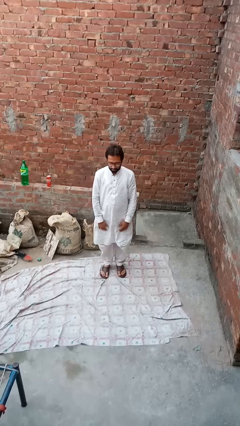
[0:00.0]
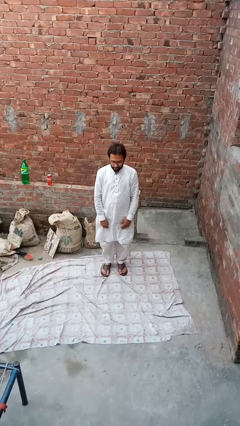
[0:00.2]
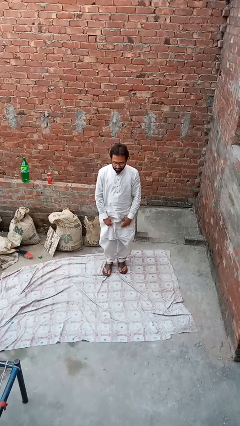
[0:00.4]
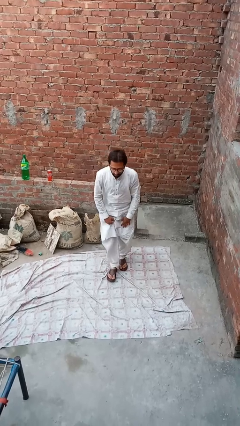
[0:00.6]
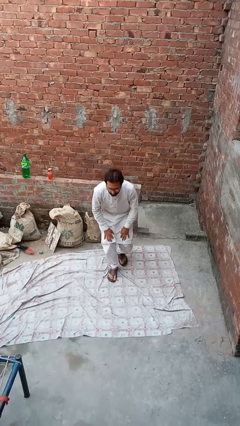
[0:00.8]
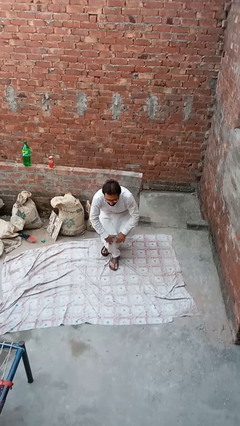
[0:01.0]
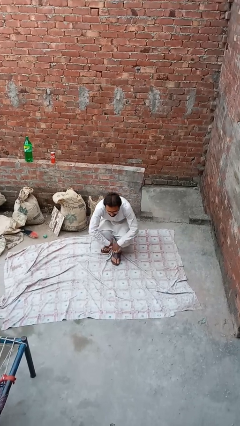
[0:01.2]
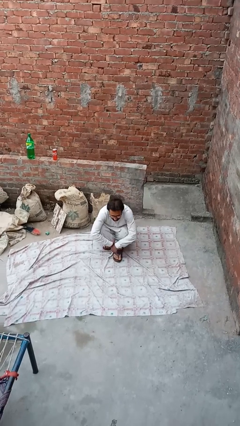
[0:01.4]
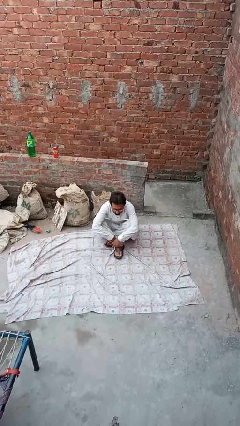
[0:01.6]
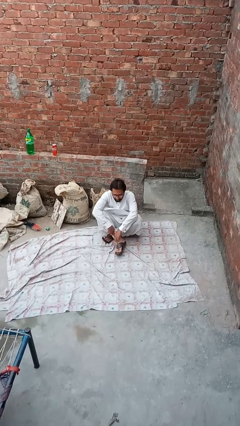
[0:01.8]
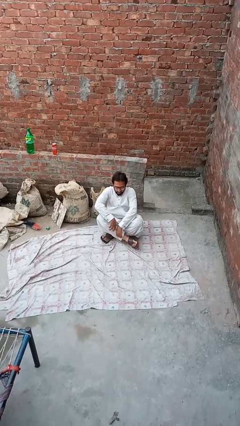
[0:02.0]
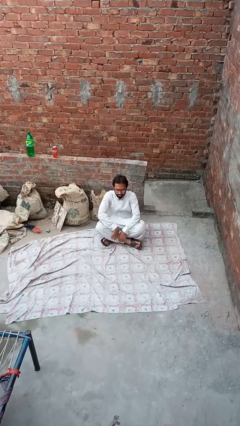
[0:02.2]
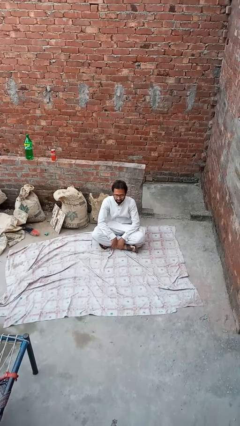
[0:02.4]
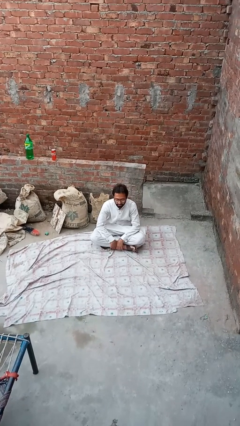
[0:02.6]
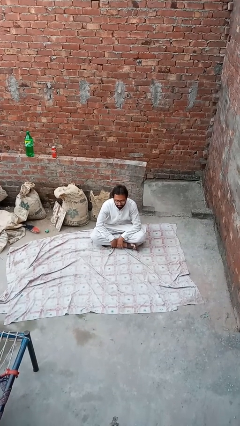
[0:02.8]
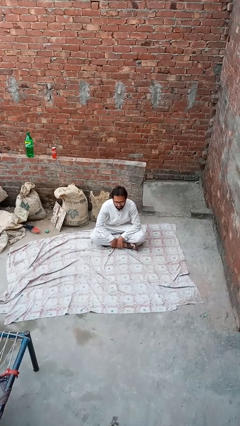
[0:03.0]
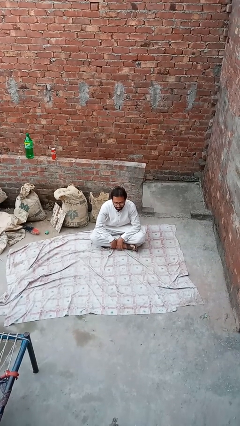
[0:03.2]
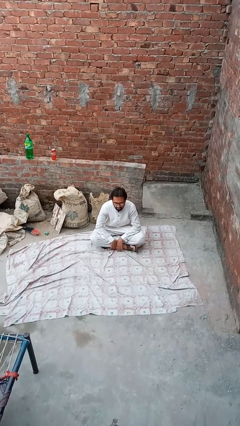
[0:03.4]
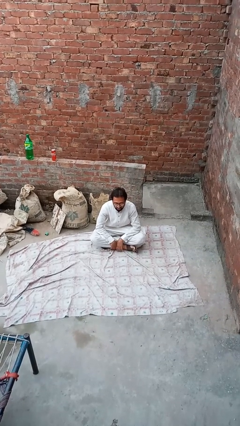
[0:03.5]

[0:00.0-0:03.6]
person sits crisscross

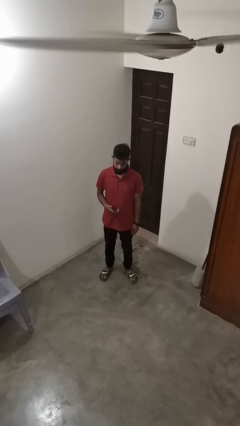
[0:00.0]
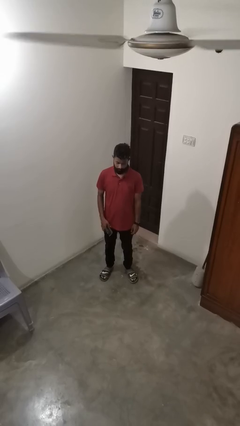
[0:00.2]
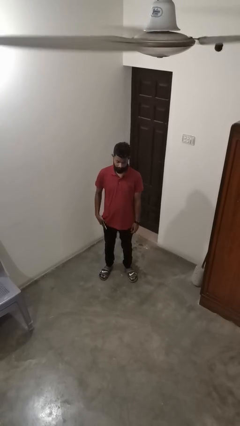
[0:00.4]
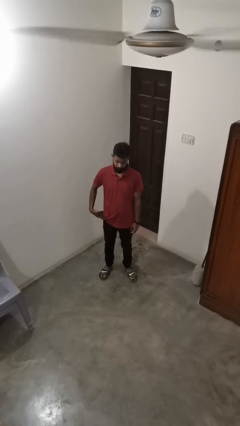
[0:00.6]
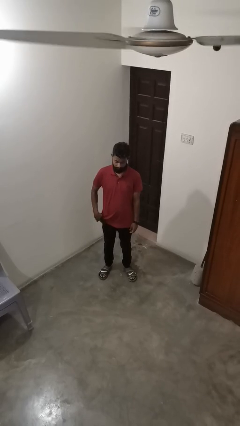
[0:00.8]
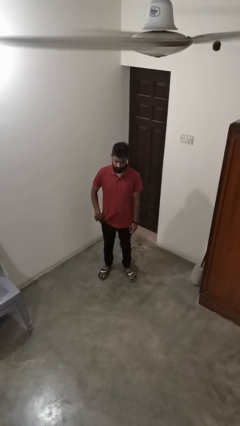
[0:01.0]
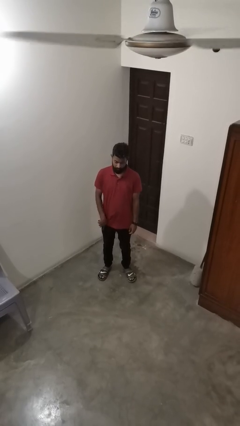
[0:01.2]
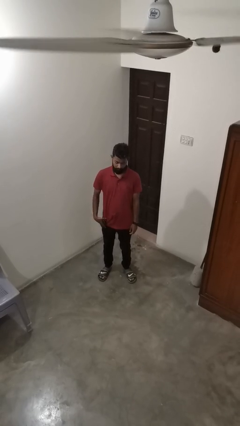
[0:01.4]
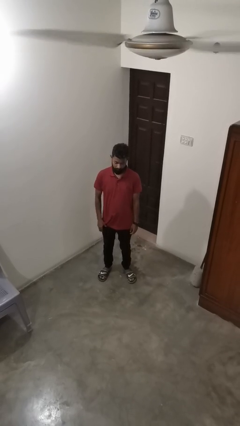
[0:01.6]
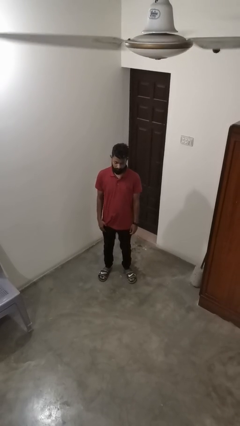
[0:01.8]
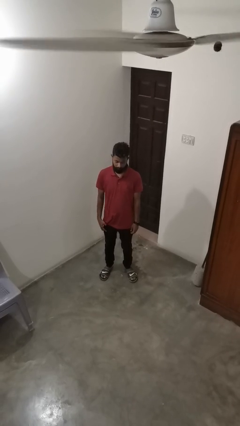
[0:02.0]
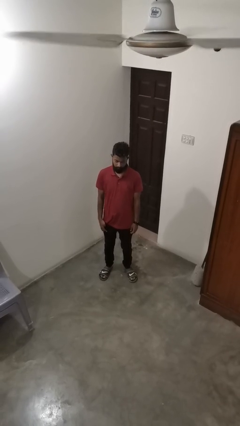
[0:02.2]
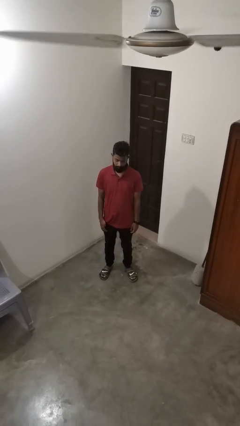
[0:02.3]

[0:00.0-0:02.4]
person puts phone into pocket

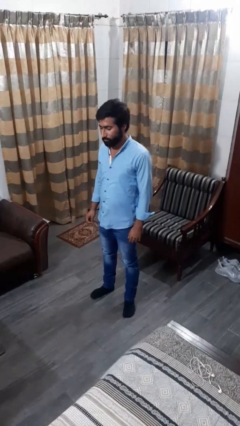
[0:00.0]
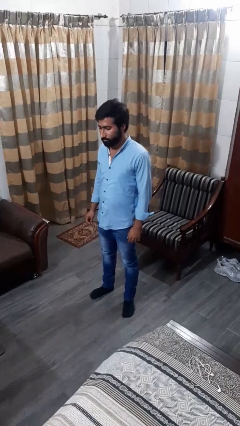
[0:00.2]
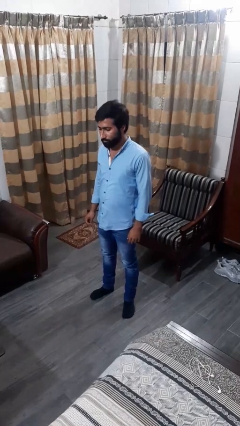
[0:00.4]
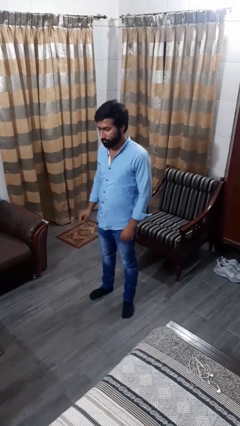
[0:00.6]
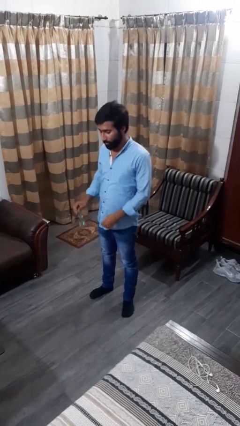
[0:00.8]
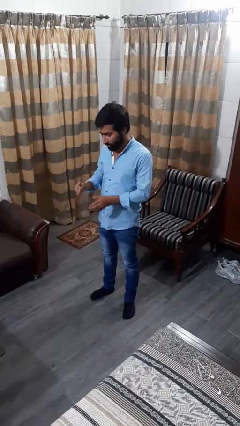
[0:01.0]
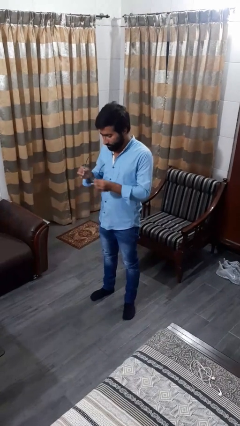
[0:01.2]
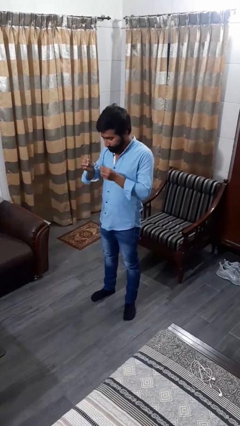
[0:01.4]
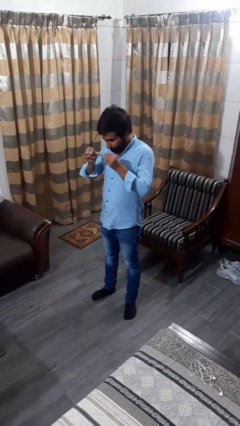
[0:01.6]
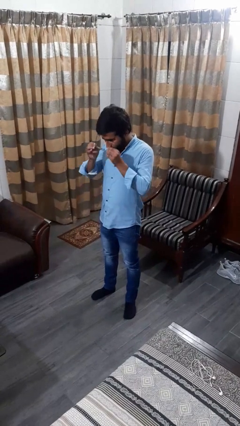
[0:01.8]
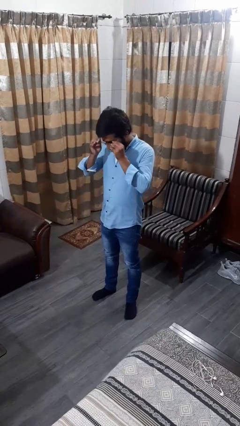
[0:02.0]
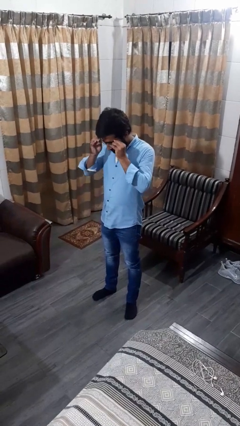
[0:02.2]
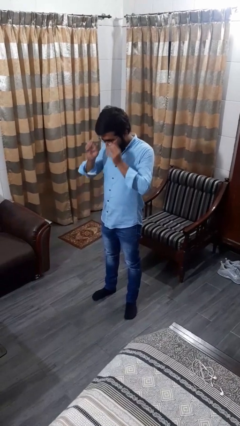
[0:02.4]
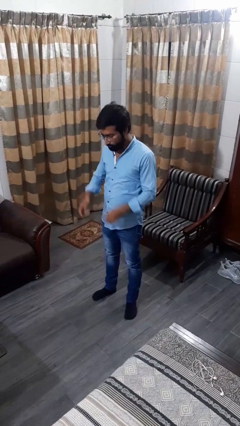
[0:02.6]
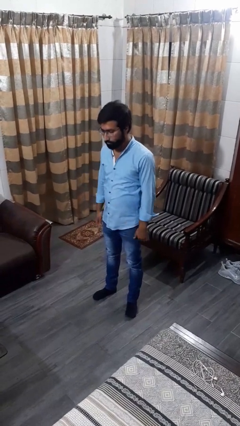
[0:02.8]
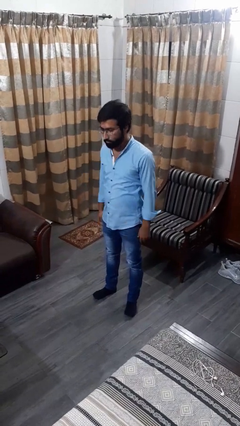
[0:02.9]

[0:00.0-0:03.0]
person puts on glasses

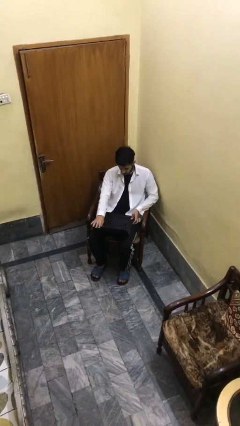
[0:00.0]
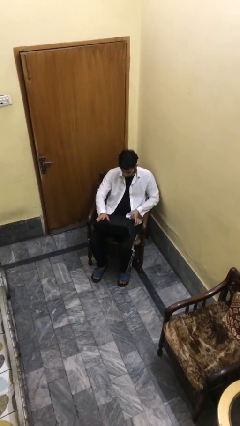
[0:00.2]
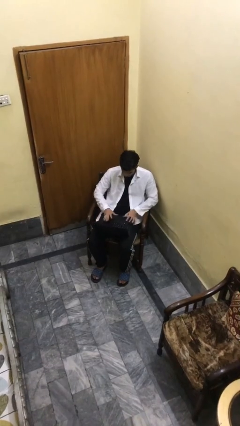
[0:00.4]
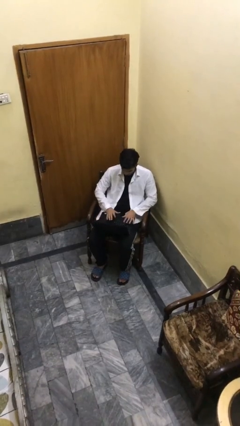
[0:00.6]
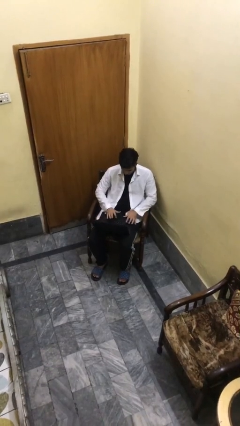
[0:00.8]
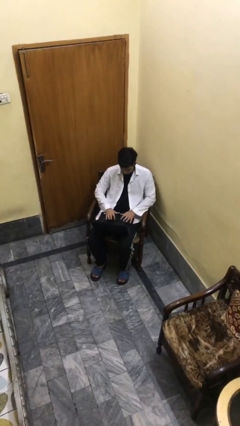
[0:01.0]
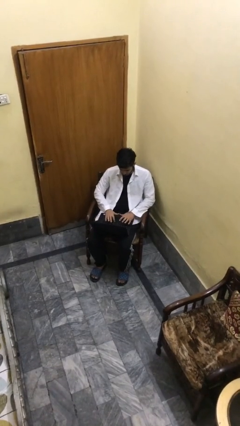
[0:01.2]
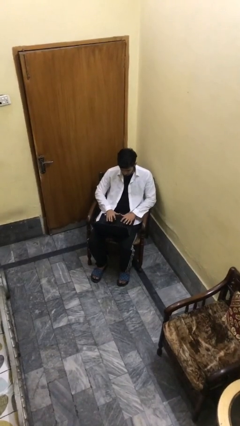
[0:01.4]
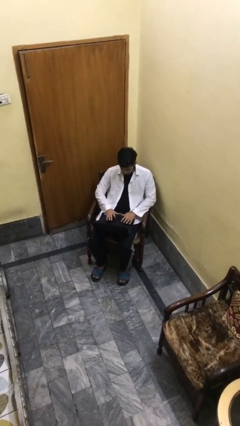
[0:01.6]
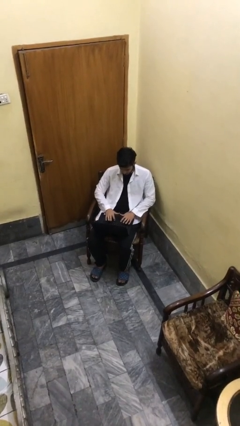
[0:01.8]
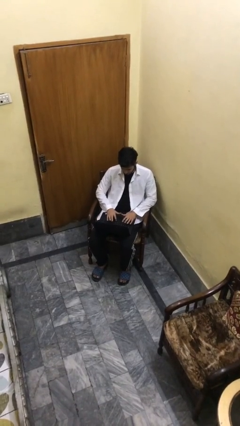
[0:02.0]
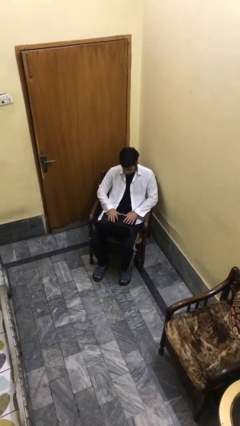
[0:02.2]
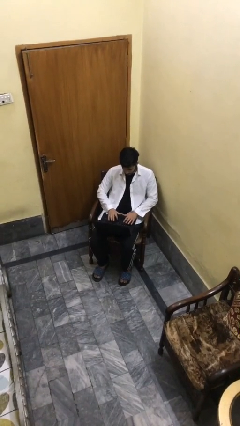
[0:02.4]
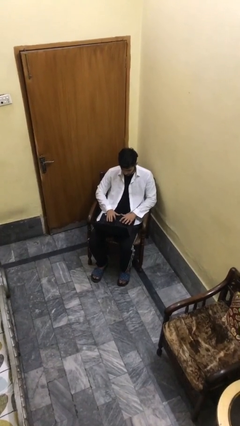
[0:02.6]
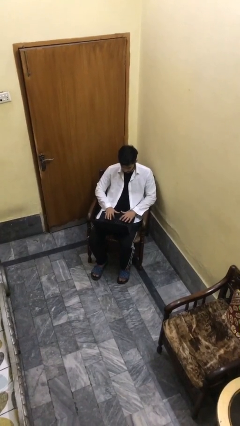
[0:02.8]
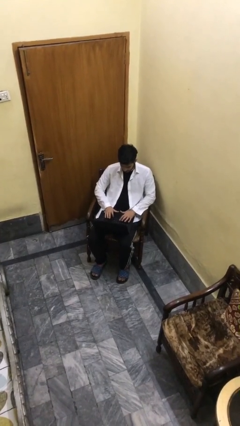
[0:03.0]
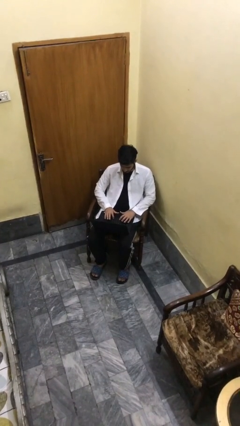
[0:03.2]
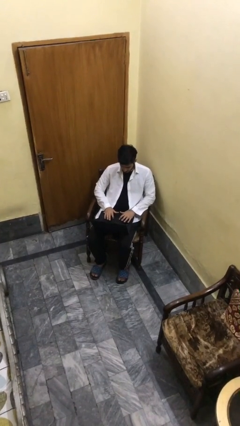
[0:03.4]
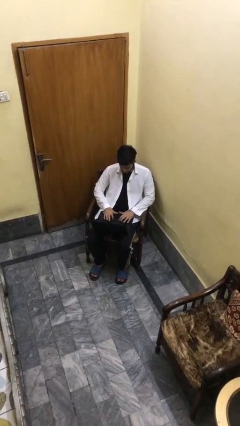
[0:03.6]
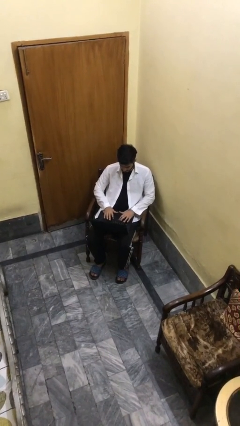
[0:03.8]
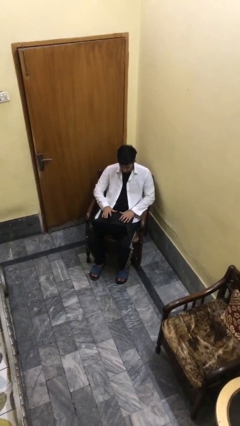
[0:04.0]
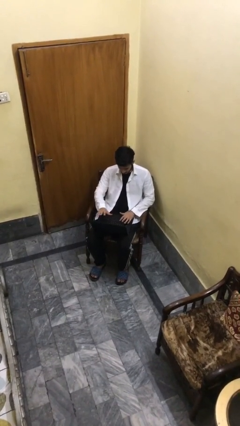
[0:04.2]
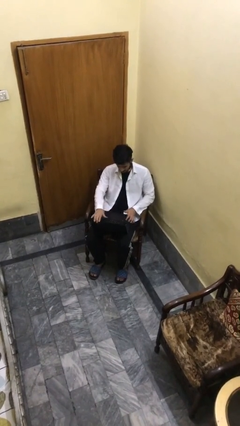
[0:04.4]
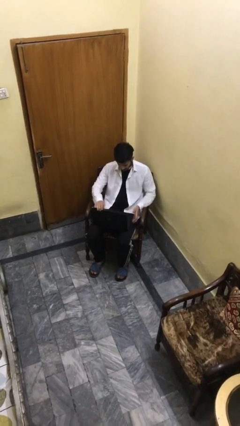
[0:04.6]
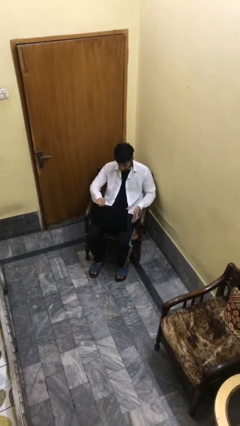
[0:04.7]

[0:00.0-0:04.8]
person interacts with laptop

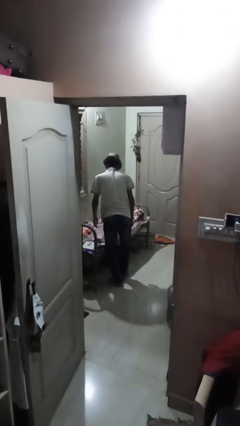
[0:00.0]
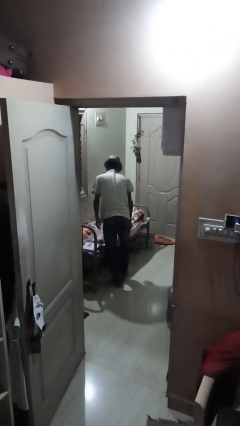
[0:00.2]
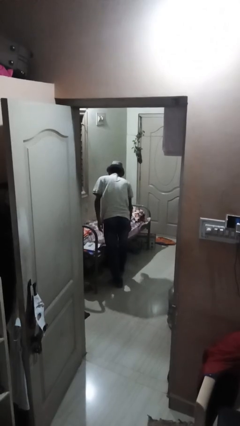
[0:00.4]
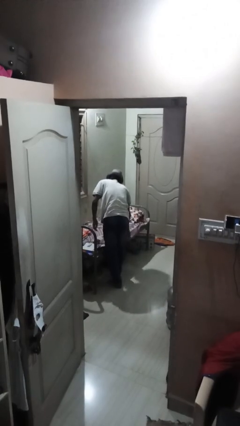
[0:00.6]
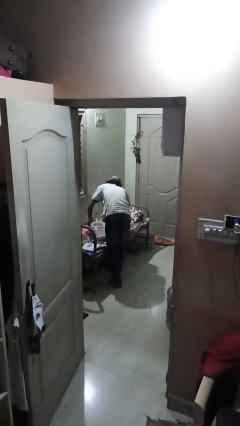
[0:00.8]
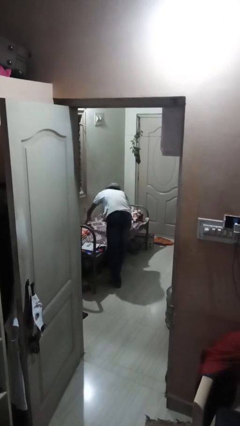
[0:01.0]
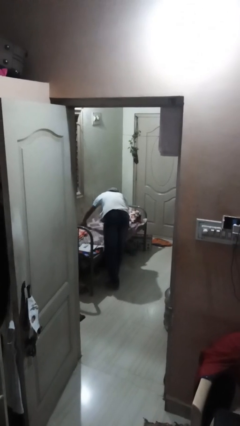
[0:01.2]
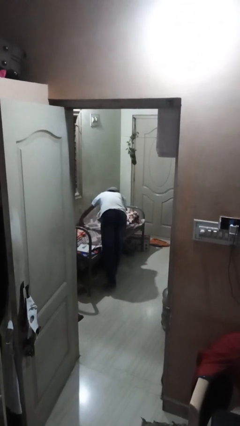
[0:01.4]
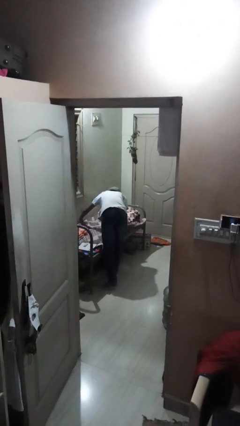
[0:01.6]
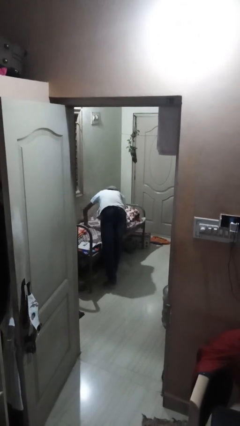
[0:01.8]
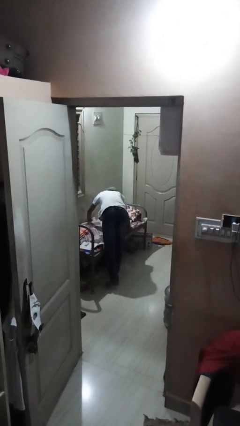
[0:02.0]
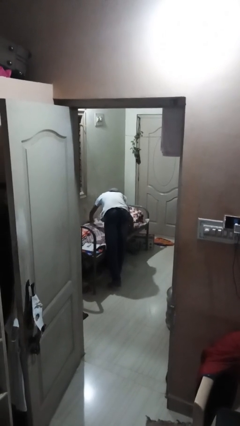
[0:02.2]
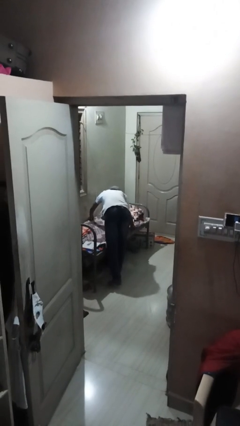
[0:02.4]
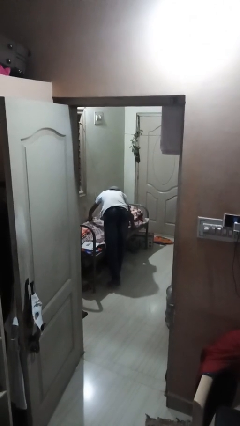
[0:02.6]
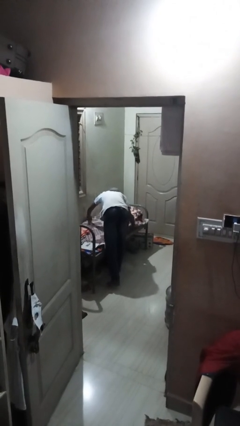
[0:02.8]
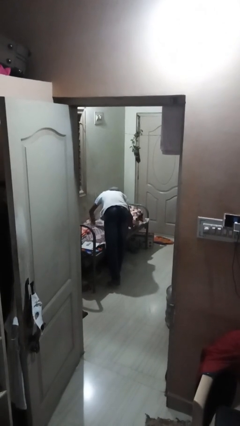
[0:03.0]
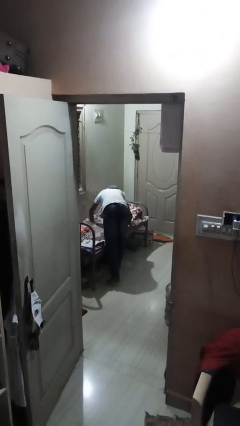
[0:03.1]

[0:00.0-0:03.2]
person makes bed

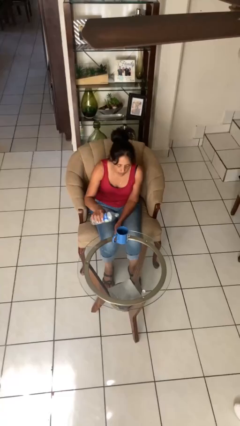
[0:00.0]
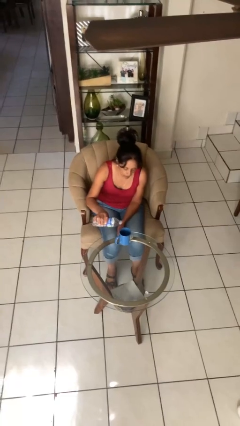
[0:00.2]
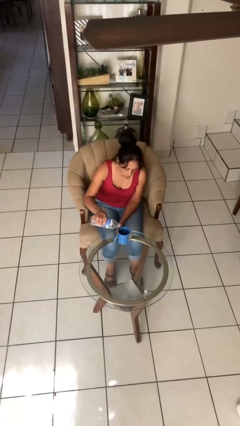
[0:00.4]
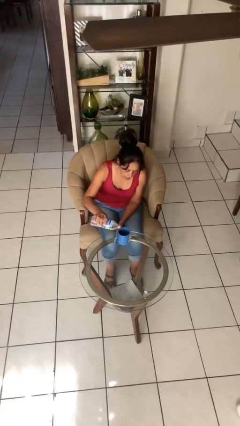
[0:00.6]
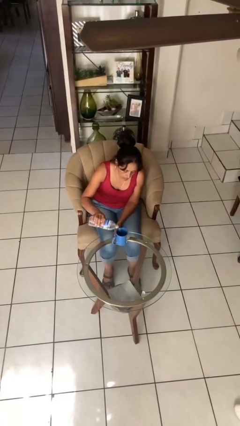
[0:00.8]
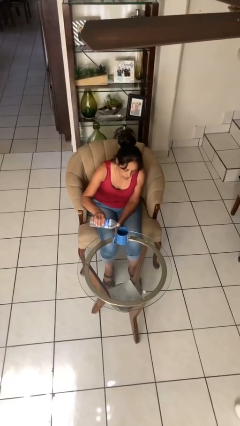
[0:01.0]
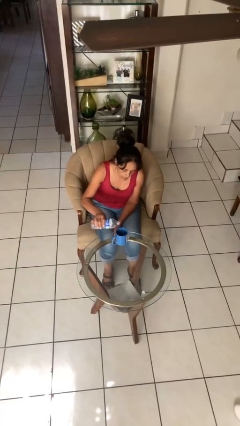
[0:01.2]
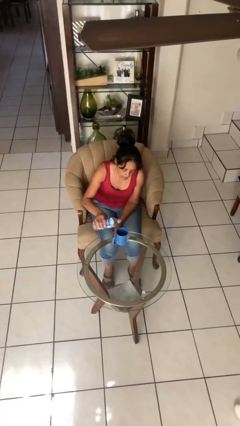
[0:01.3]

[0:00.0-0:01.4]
person pours liquid into cup
